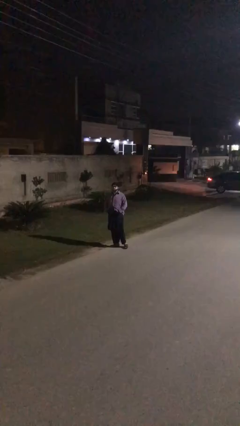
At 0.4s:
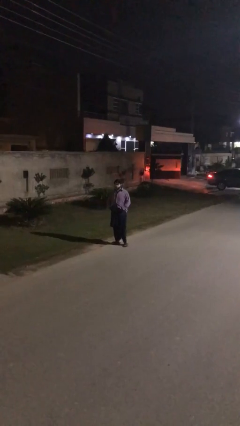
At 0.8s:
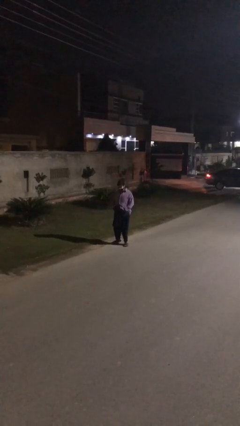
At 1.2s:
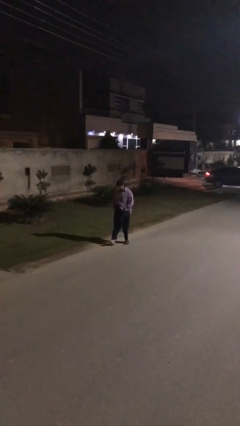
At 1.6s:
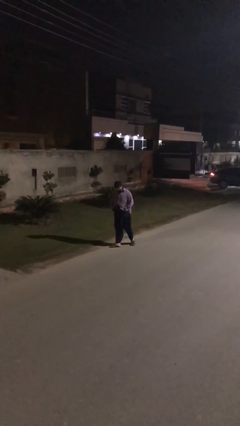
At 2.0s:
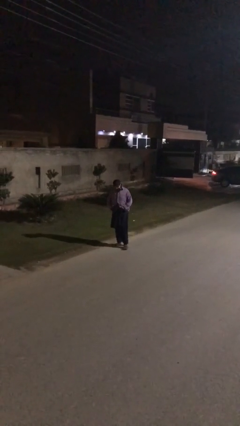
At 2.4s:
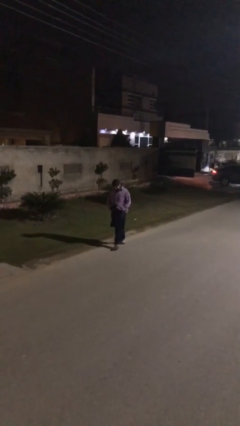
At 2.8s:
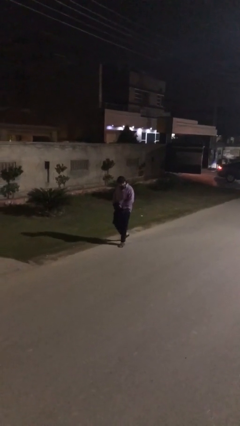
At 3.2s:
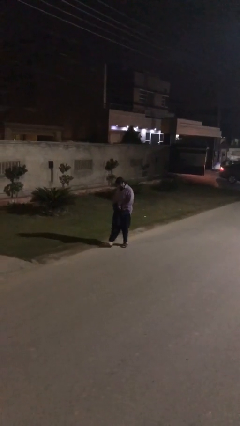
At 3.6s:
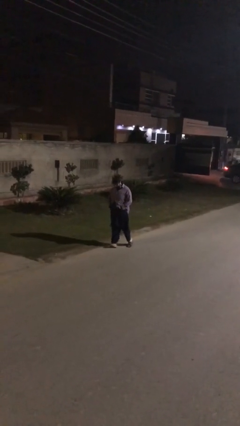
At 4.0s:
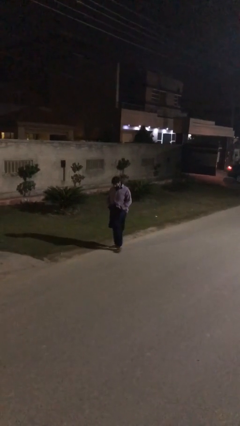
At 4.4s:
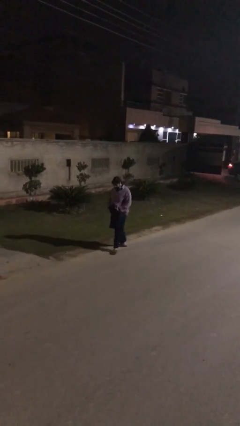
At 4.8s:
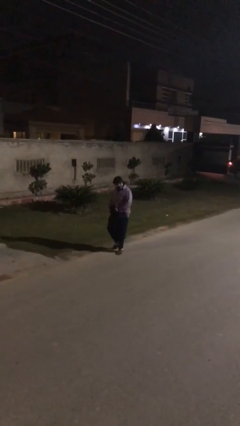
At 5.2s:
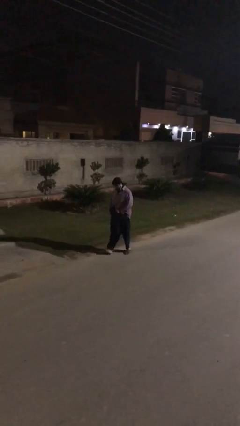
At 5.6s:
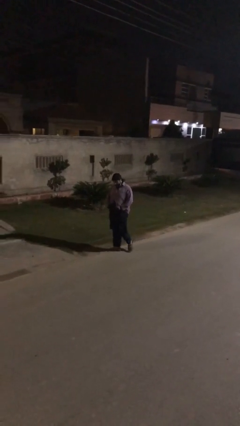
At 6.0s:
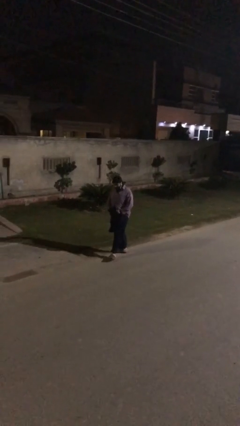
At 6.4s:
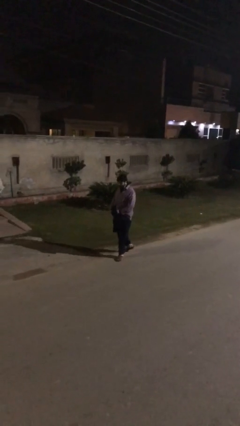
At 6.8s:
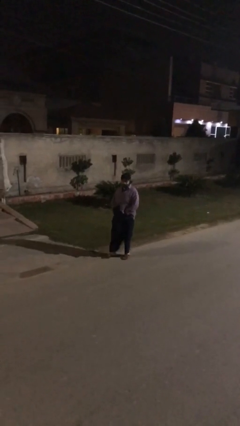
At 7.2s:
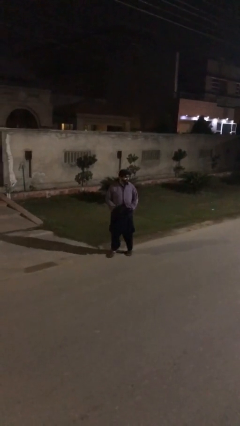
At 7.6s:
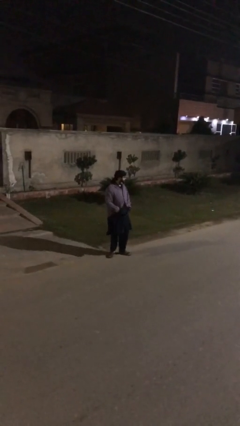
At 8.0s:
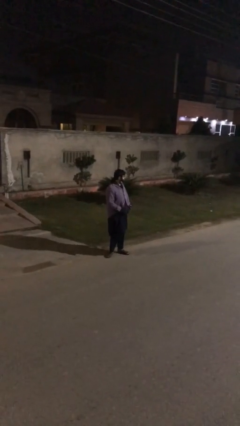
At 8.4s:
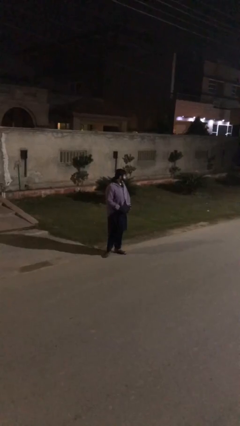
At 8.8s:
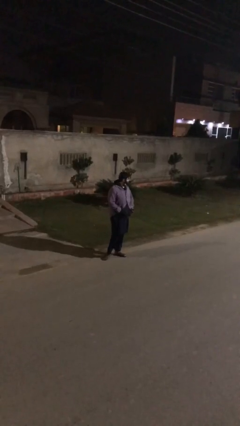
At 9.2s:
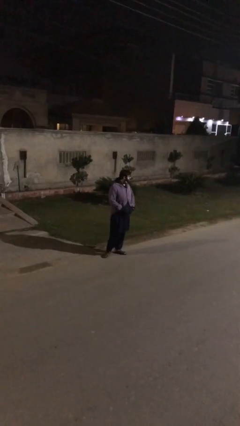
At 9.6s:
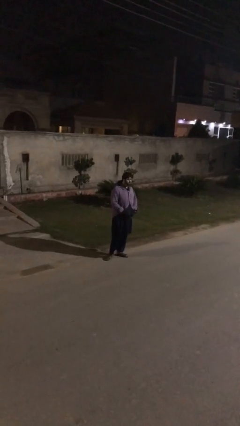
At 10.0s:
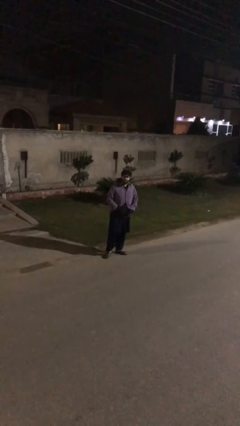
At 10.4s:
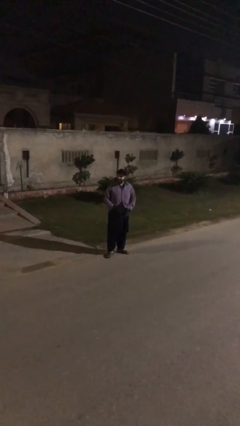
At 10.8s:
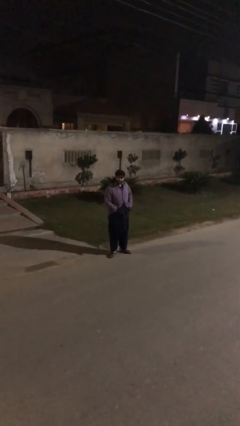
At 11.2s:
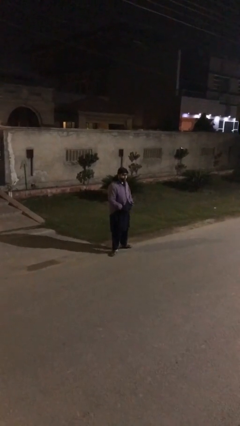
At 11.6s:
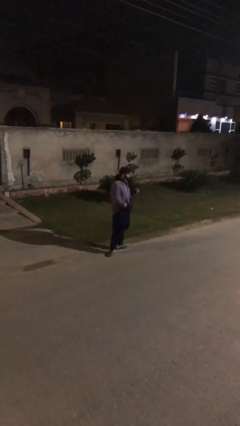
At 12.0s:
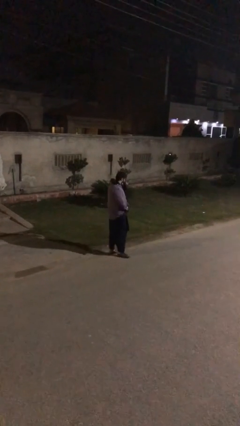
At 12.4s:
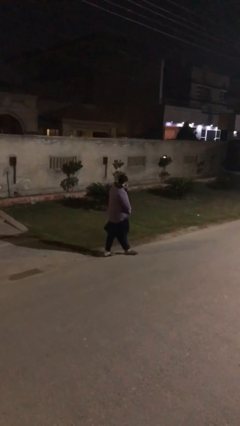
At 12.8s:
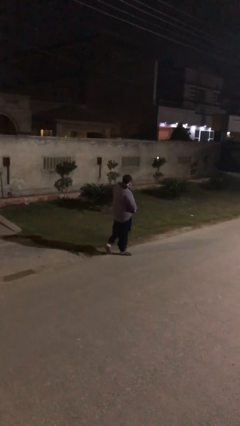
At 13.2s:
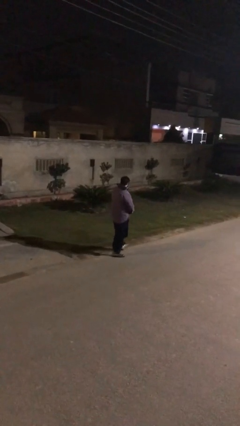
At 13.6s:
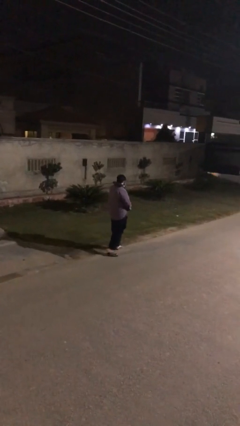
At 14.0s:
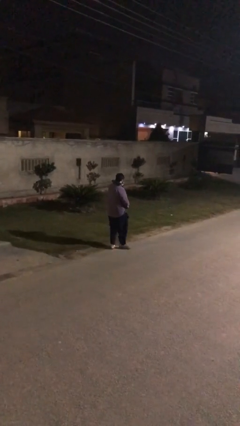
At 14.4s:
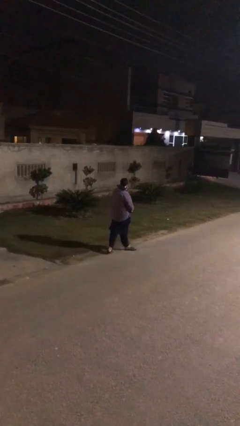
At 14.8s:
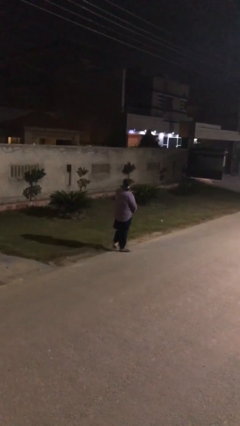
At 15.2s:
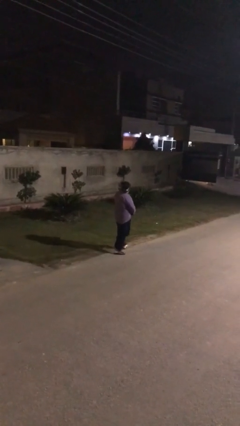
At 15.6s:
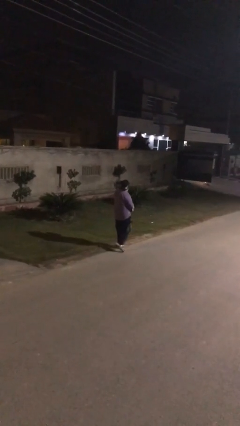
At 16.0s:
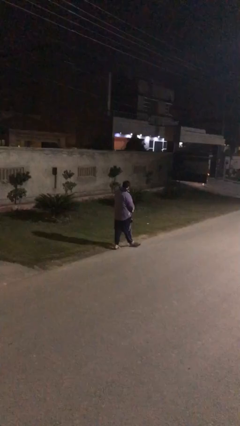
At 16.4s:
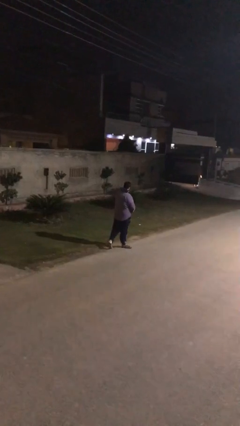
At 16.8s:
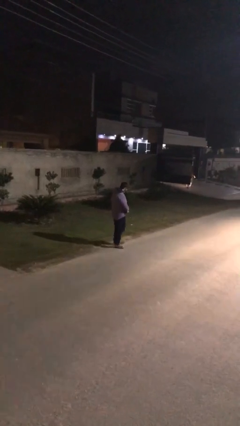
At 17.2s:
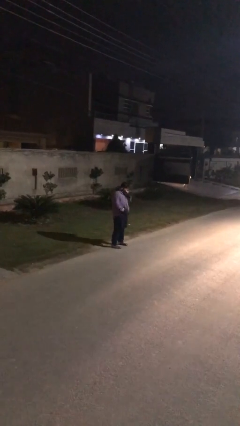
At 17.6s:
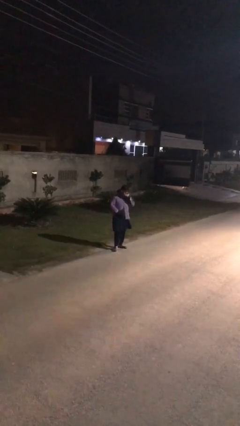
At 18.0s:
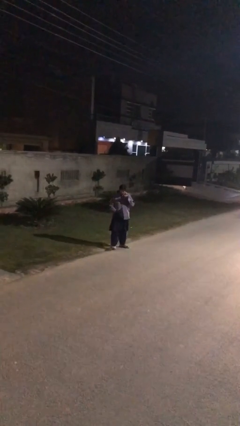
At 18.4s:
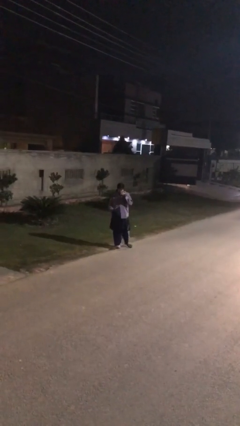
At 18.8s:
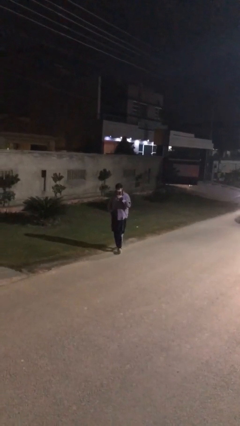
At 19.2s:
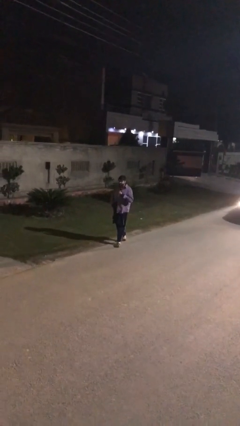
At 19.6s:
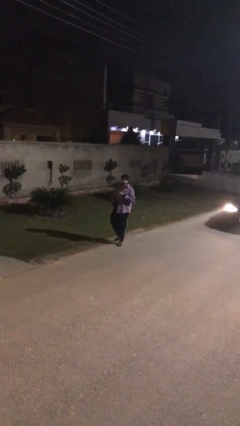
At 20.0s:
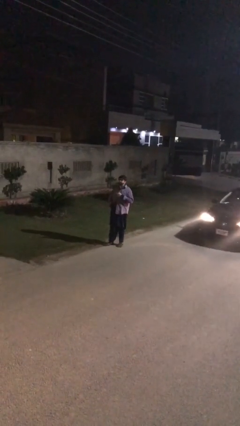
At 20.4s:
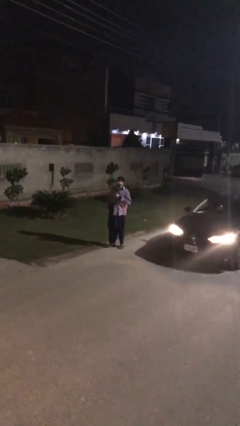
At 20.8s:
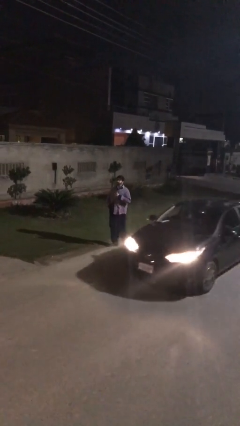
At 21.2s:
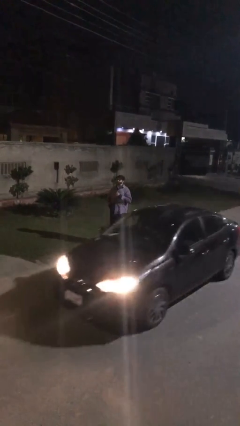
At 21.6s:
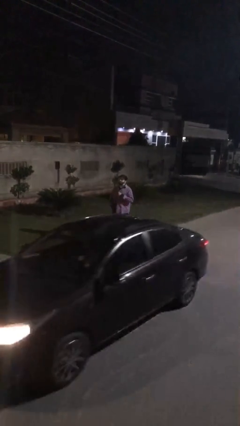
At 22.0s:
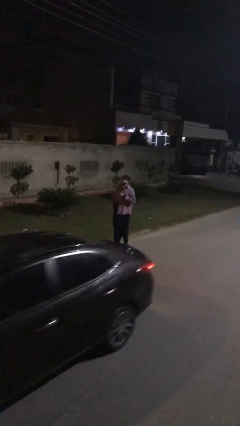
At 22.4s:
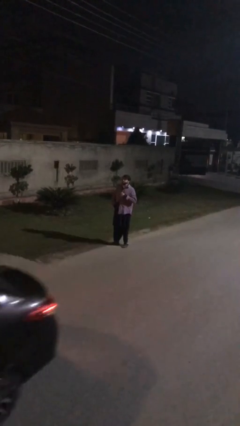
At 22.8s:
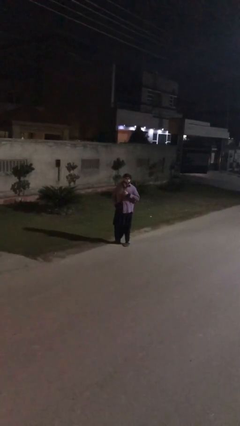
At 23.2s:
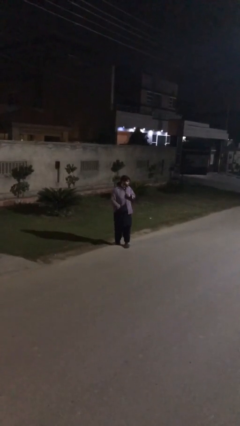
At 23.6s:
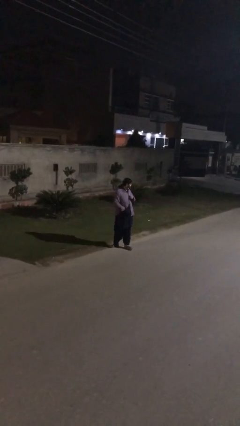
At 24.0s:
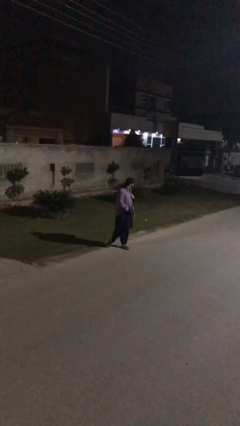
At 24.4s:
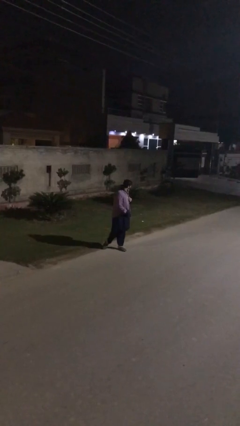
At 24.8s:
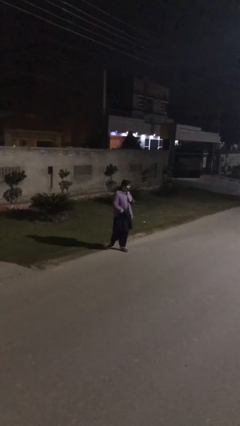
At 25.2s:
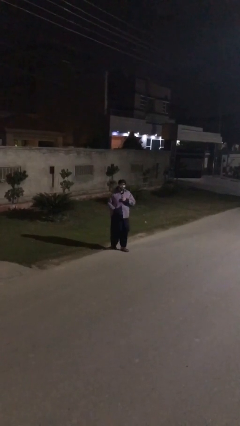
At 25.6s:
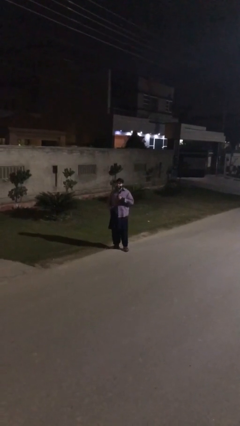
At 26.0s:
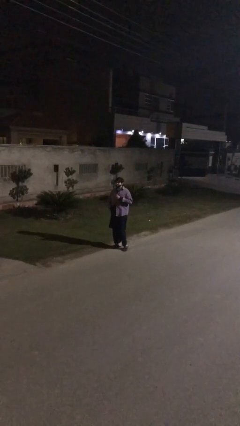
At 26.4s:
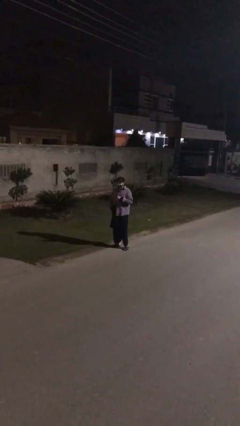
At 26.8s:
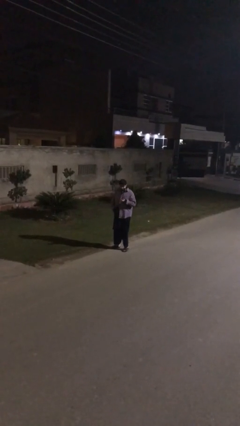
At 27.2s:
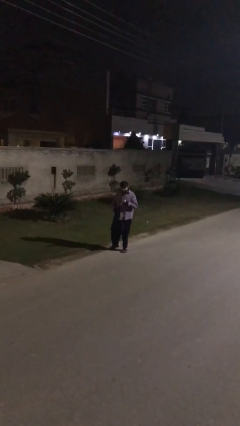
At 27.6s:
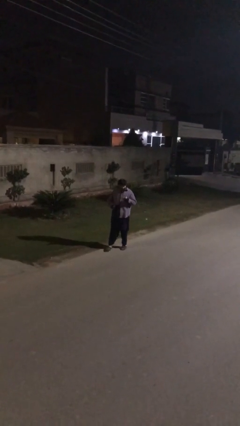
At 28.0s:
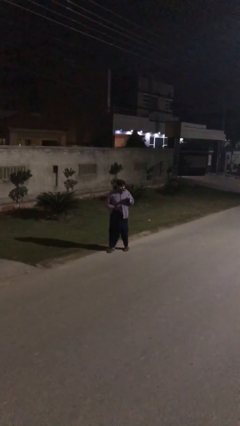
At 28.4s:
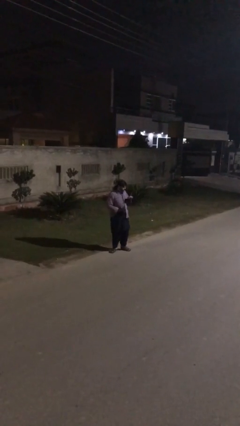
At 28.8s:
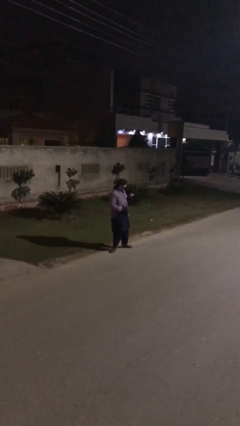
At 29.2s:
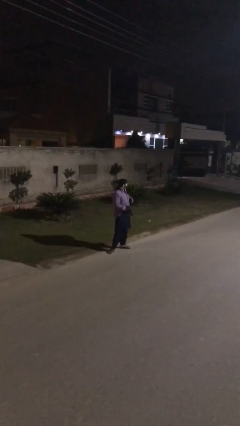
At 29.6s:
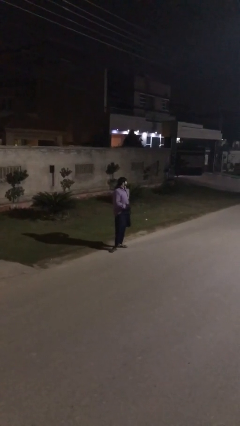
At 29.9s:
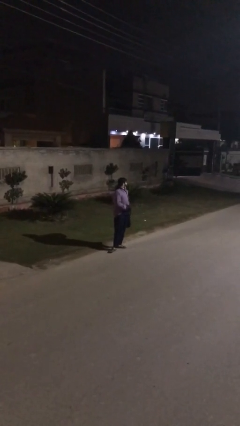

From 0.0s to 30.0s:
person walks

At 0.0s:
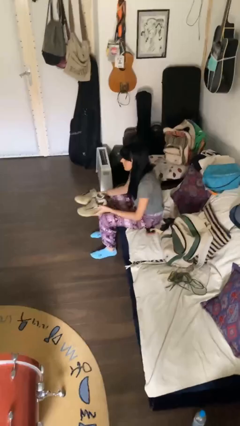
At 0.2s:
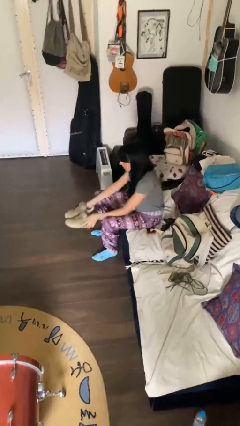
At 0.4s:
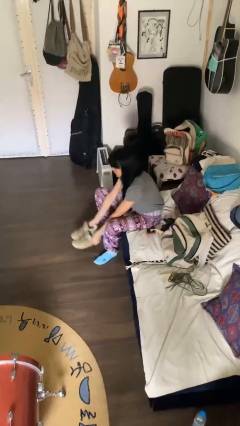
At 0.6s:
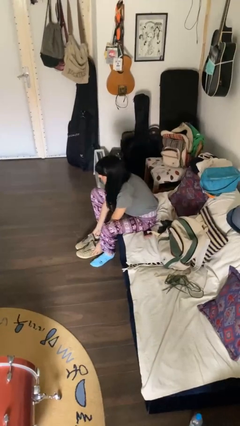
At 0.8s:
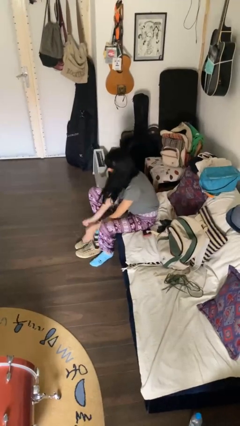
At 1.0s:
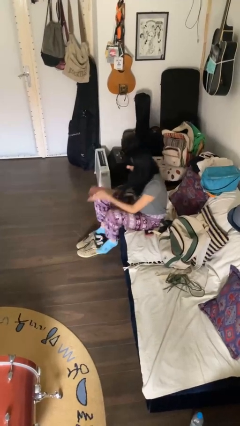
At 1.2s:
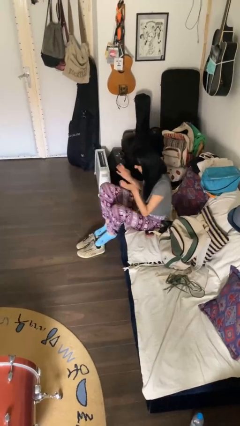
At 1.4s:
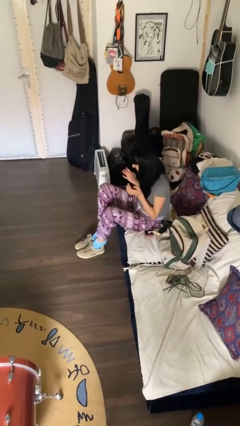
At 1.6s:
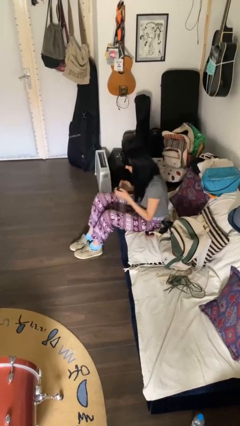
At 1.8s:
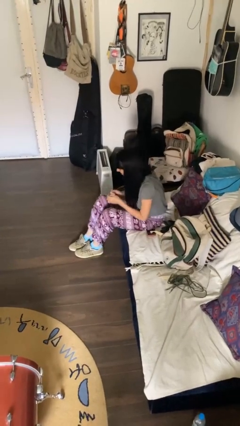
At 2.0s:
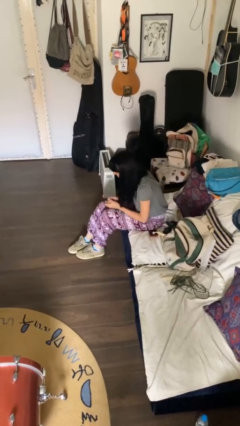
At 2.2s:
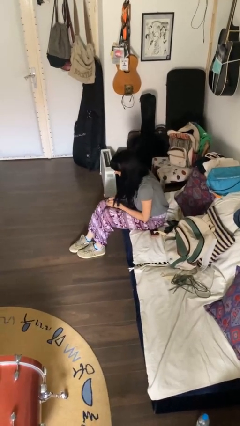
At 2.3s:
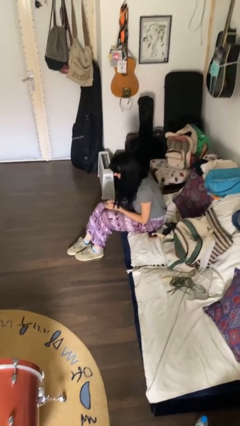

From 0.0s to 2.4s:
person puts on shoes

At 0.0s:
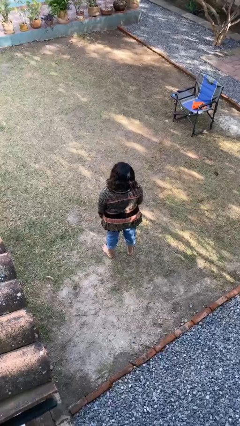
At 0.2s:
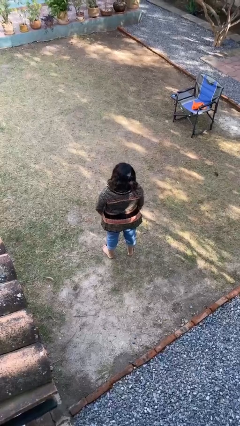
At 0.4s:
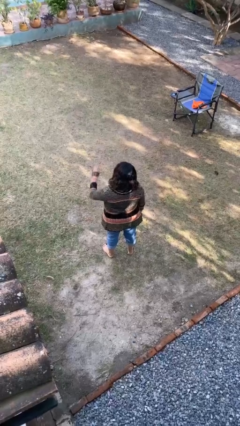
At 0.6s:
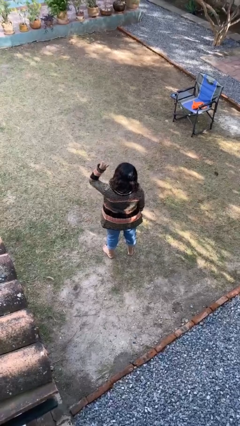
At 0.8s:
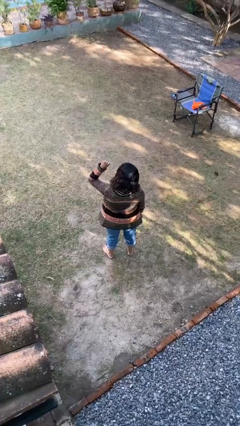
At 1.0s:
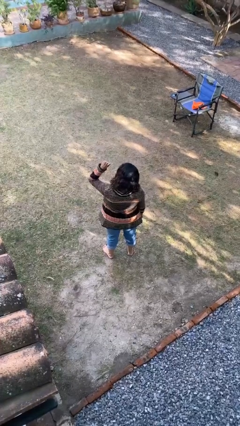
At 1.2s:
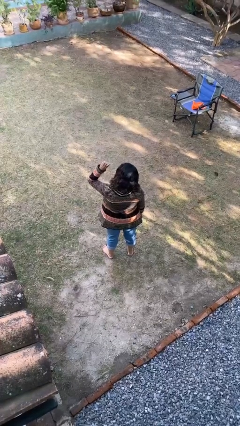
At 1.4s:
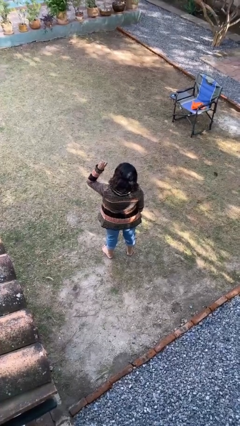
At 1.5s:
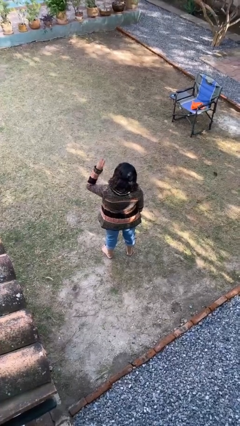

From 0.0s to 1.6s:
person gestures number three
